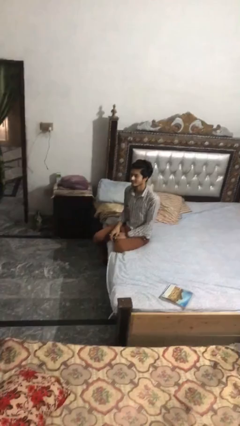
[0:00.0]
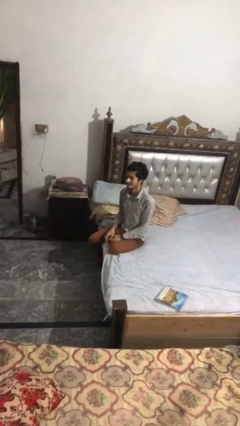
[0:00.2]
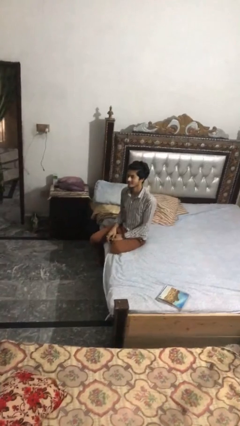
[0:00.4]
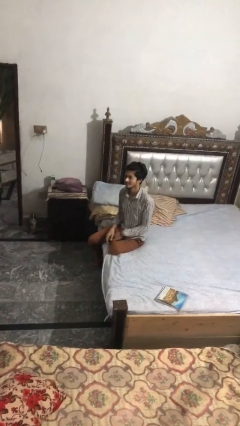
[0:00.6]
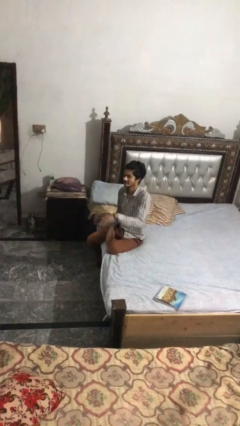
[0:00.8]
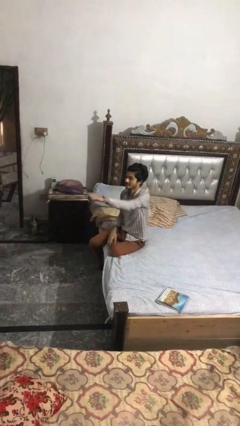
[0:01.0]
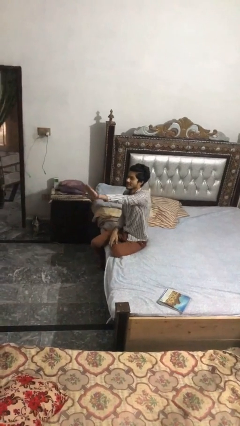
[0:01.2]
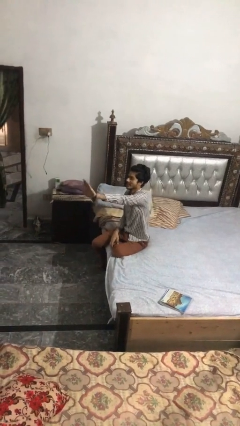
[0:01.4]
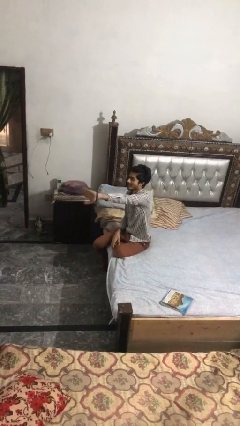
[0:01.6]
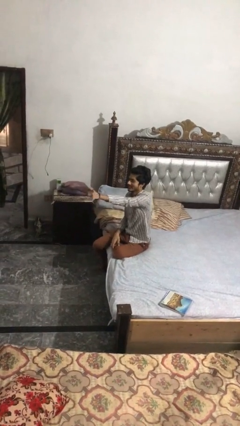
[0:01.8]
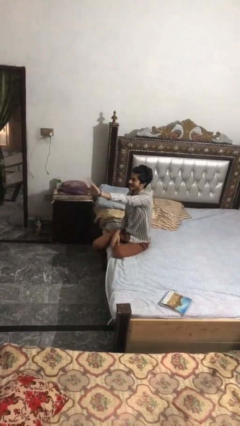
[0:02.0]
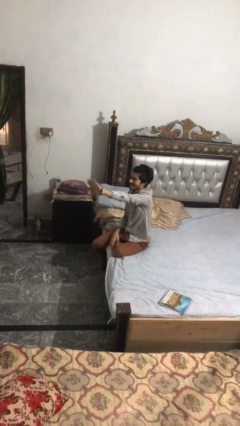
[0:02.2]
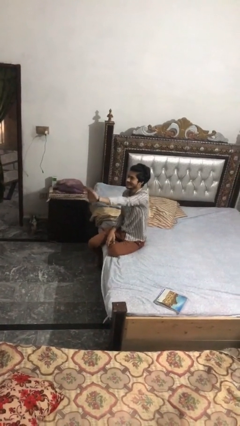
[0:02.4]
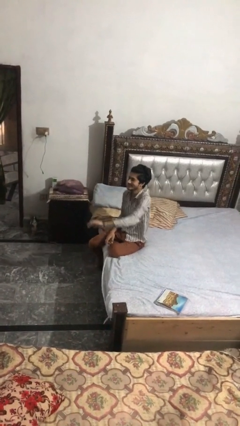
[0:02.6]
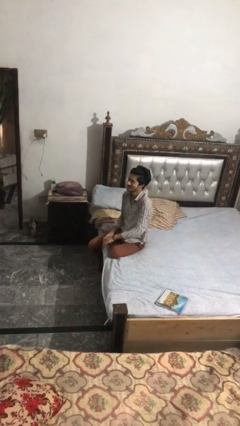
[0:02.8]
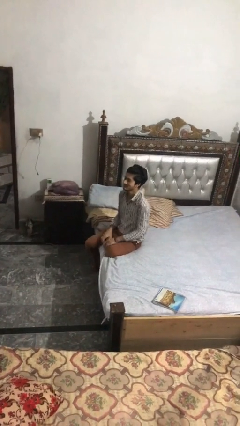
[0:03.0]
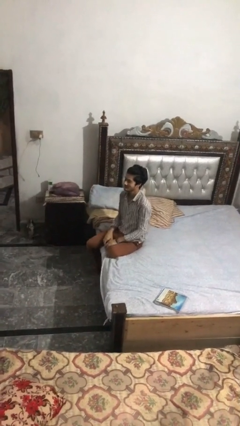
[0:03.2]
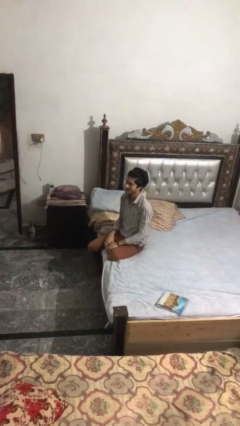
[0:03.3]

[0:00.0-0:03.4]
person waves at person

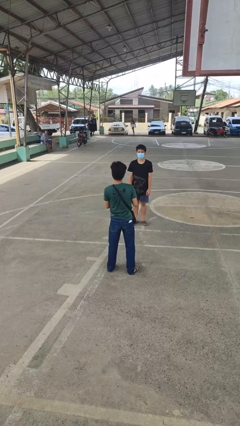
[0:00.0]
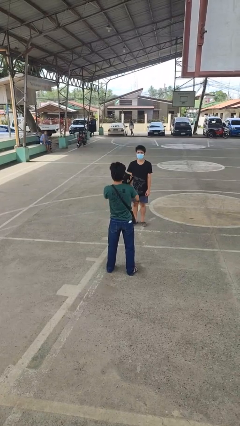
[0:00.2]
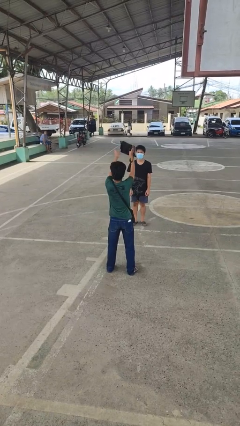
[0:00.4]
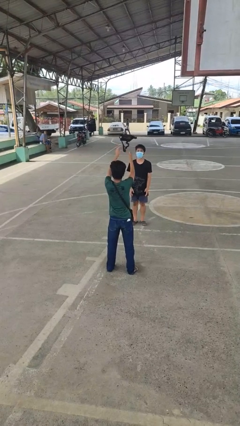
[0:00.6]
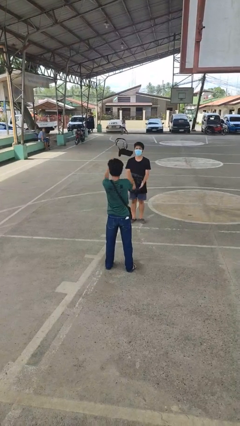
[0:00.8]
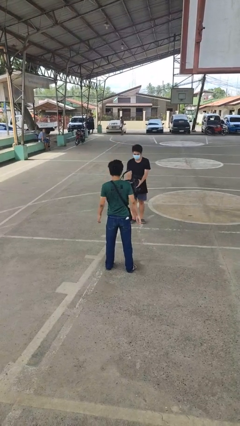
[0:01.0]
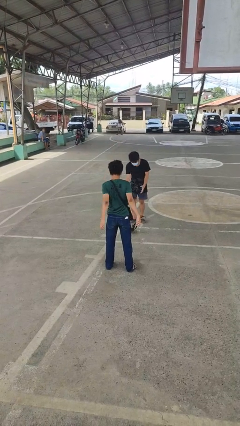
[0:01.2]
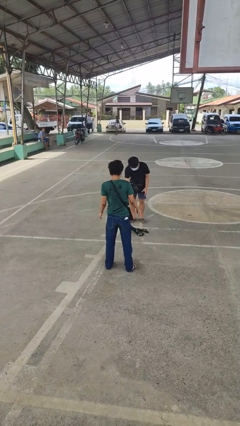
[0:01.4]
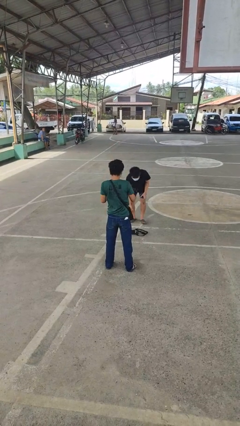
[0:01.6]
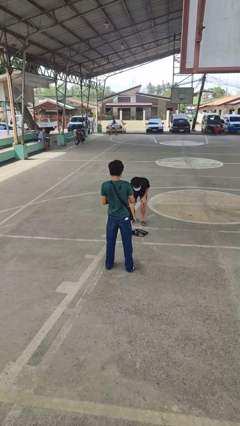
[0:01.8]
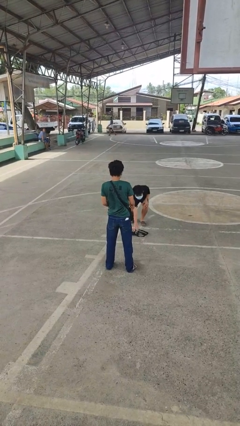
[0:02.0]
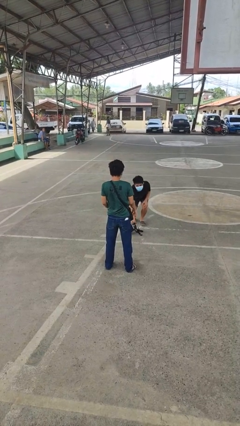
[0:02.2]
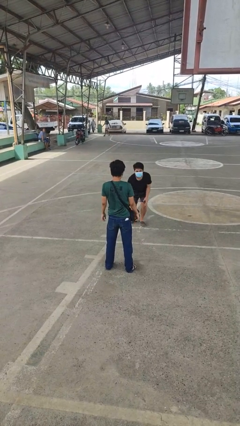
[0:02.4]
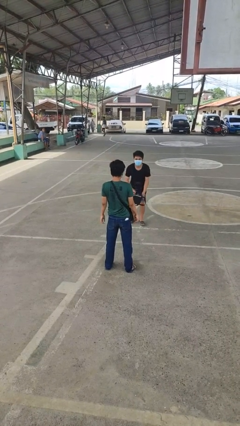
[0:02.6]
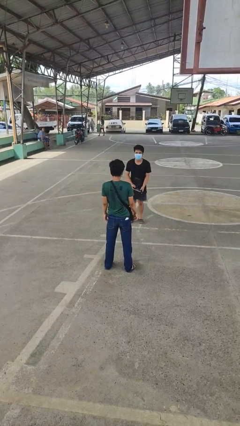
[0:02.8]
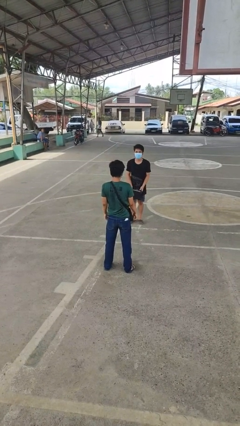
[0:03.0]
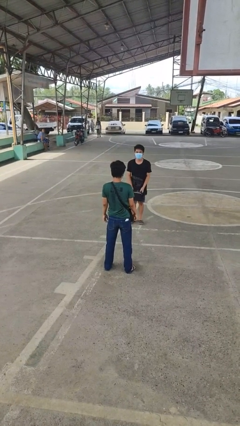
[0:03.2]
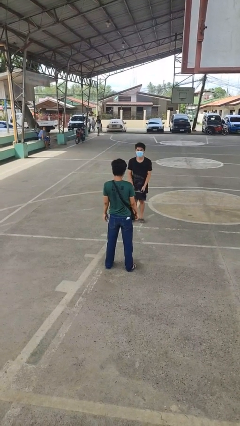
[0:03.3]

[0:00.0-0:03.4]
person throws object to person

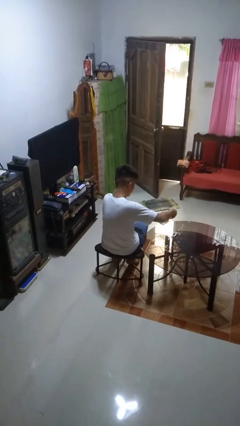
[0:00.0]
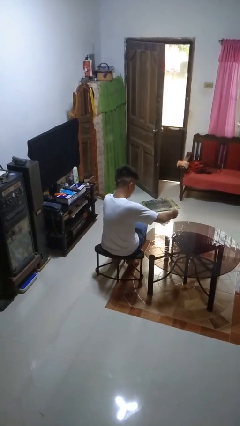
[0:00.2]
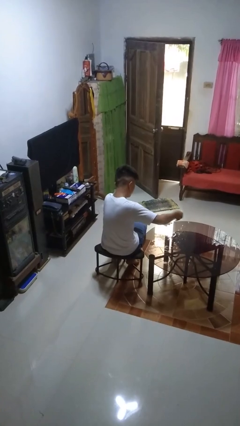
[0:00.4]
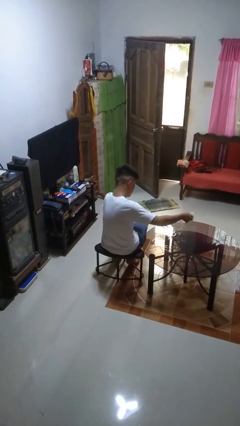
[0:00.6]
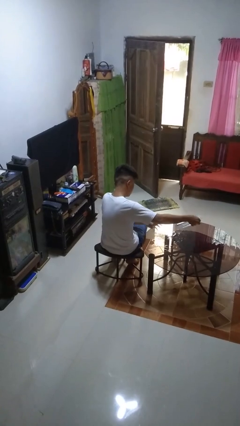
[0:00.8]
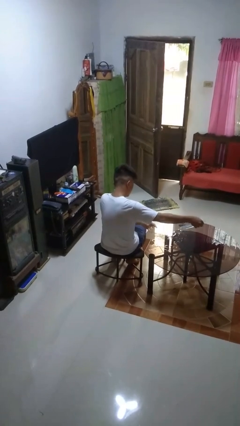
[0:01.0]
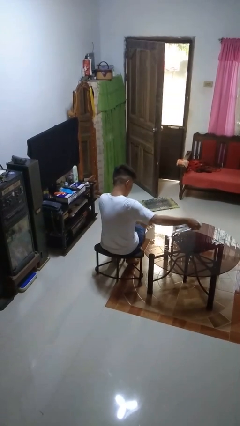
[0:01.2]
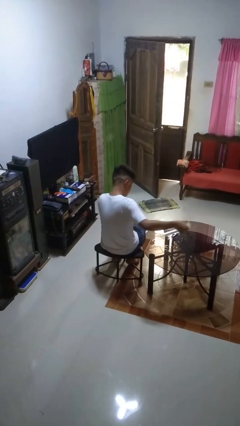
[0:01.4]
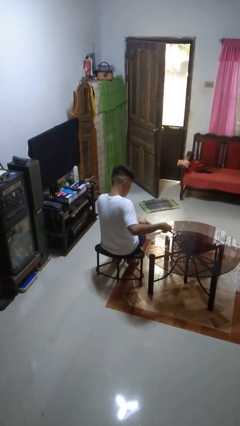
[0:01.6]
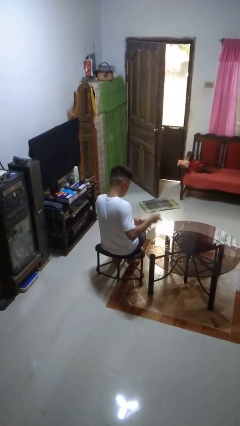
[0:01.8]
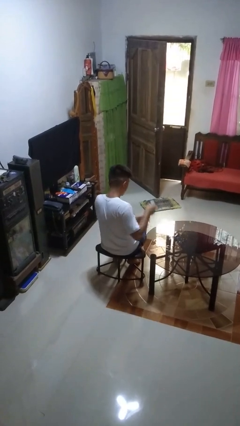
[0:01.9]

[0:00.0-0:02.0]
person sprays from bottle

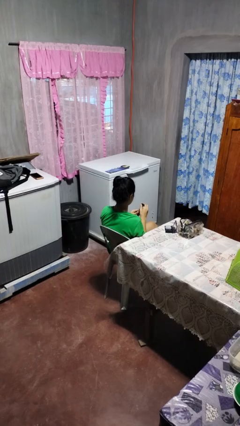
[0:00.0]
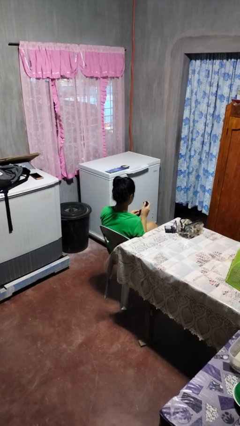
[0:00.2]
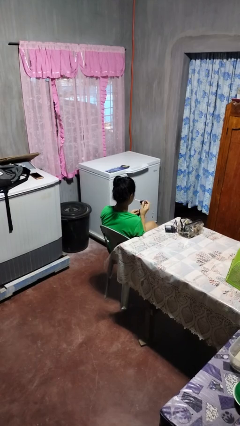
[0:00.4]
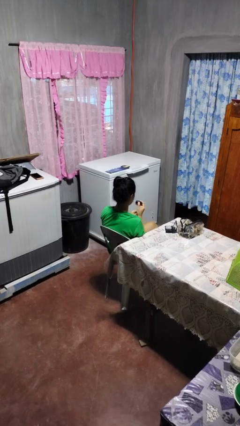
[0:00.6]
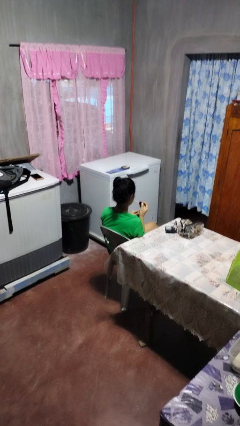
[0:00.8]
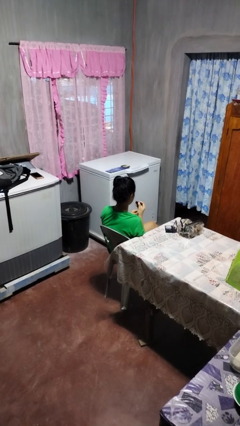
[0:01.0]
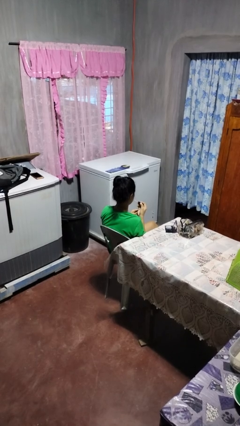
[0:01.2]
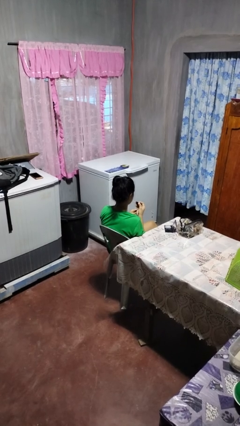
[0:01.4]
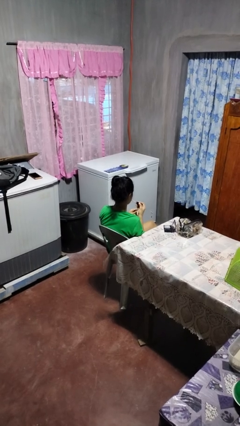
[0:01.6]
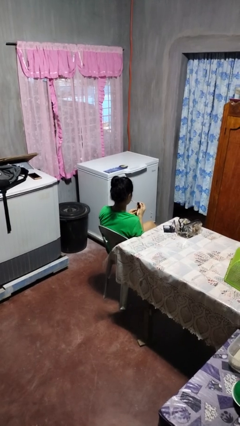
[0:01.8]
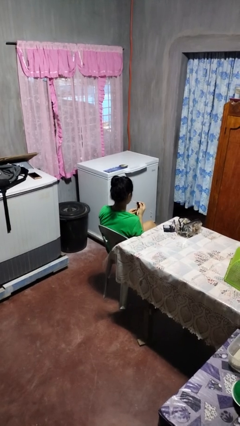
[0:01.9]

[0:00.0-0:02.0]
person applies lip makeup

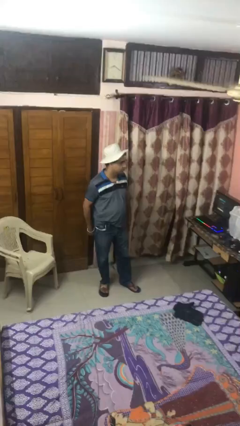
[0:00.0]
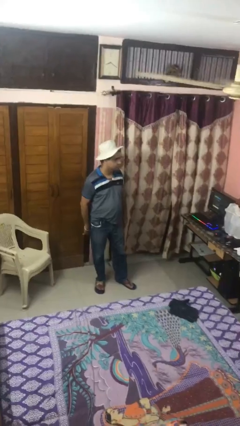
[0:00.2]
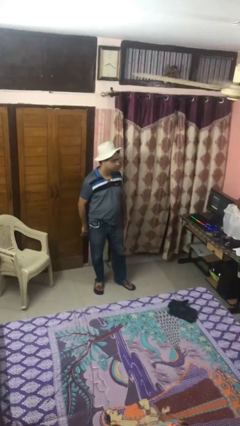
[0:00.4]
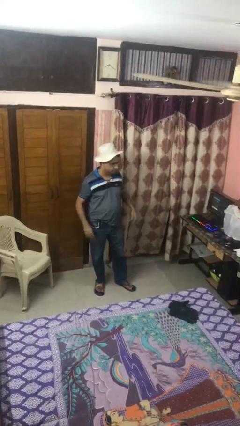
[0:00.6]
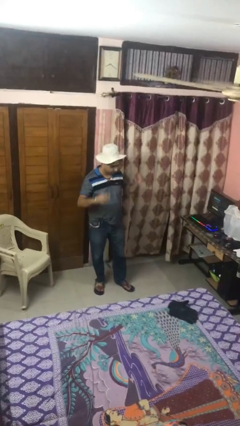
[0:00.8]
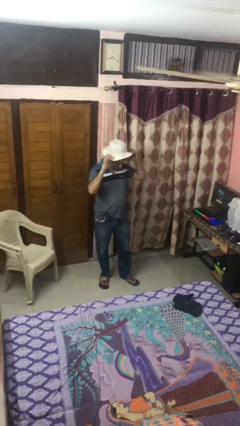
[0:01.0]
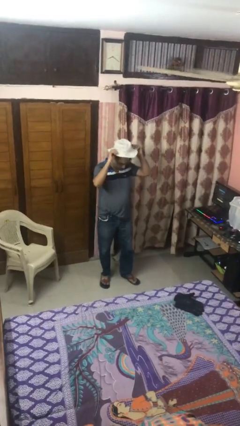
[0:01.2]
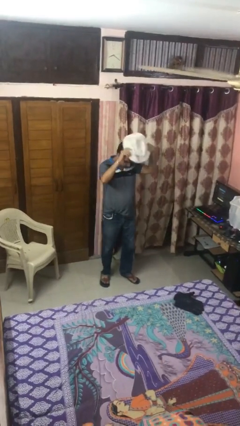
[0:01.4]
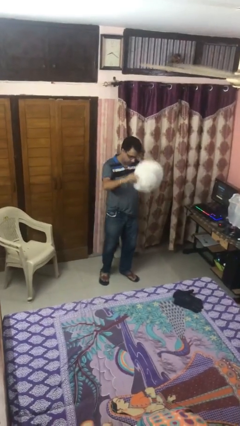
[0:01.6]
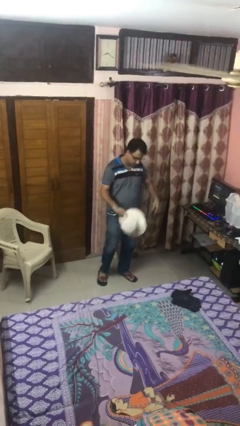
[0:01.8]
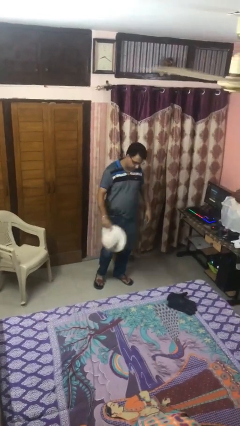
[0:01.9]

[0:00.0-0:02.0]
person takes off hat

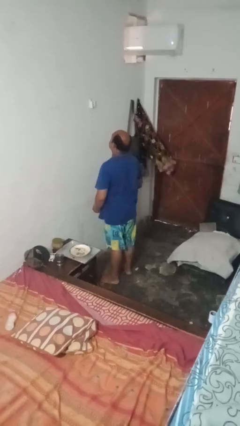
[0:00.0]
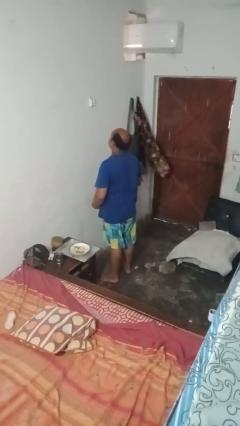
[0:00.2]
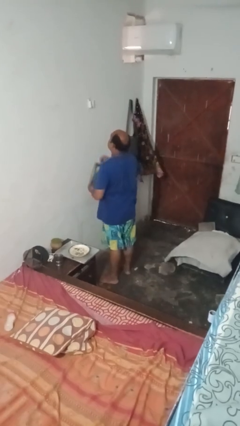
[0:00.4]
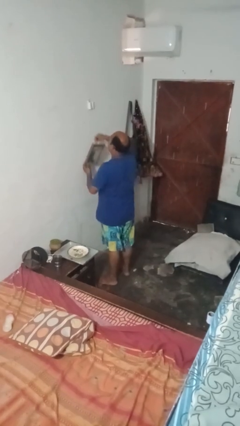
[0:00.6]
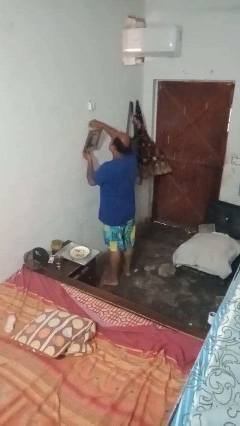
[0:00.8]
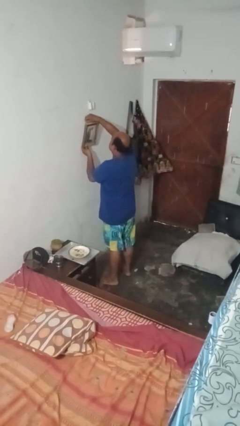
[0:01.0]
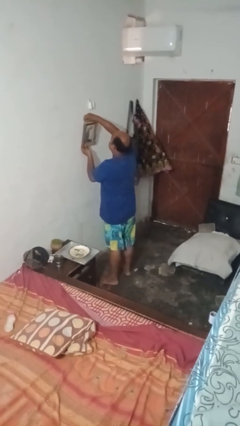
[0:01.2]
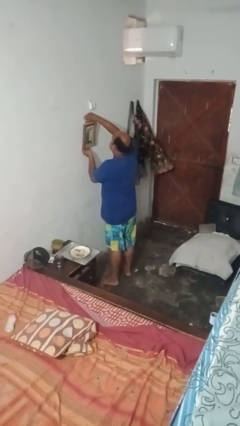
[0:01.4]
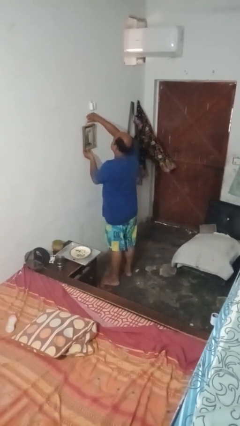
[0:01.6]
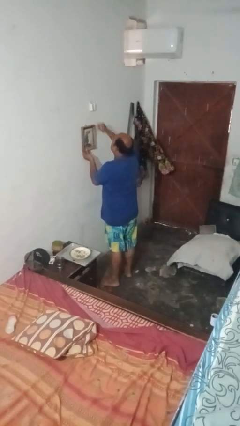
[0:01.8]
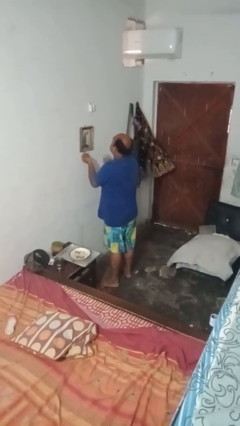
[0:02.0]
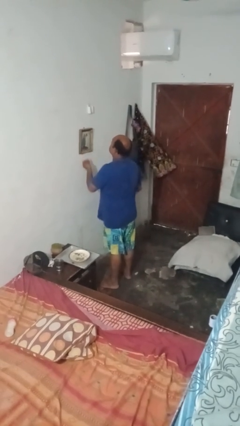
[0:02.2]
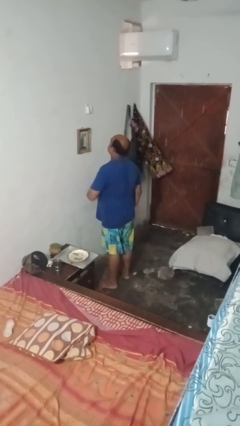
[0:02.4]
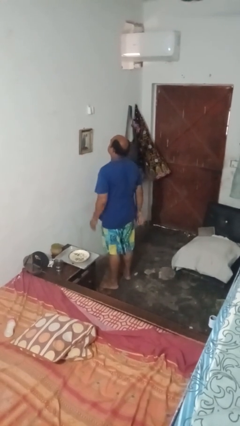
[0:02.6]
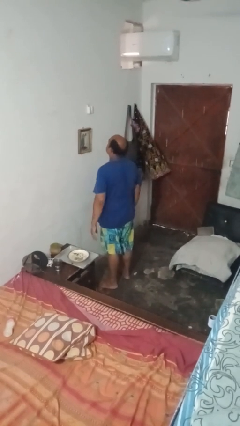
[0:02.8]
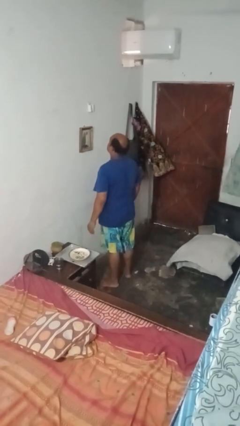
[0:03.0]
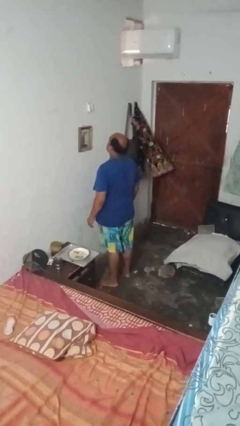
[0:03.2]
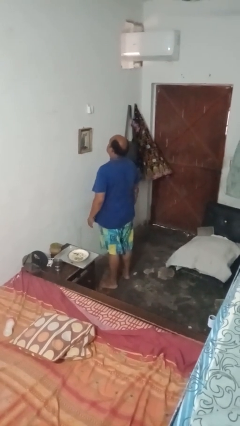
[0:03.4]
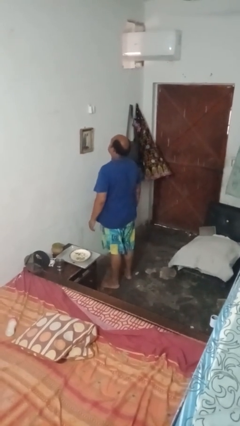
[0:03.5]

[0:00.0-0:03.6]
person puts up picture frame

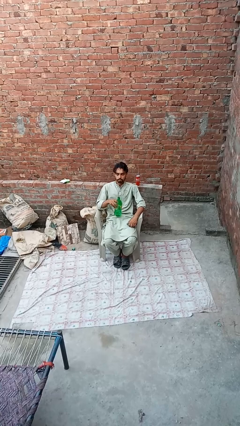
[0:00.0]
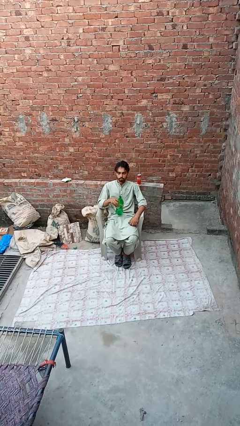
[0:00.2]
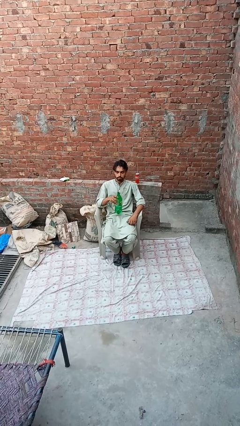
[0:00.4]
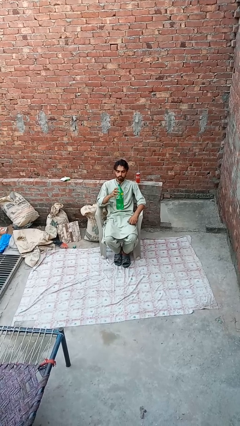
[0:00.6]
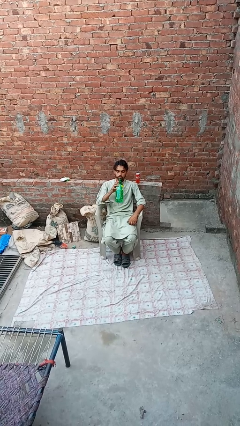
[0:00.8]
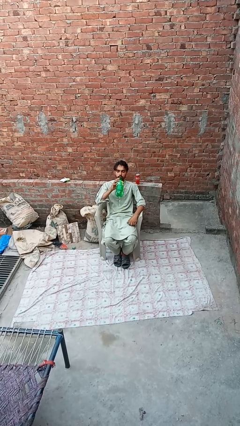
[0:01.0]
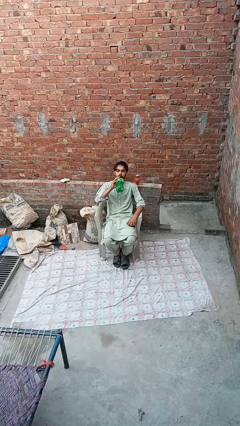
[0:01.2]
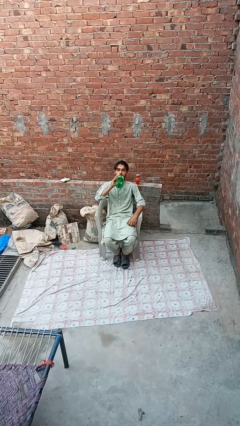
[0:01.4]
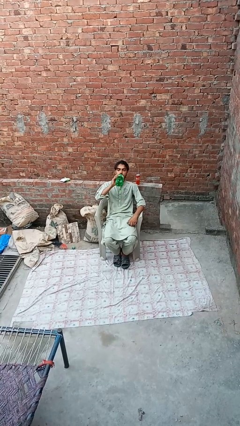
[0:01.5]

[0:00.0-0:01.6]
person drinks from bottle
